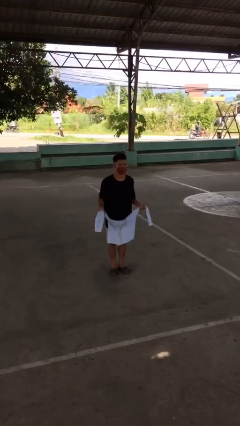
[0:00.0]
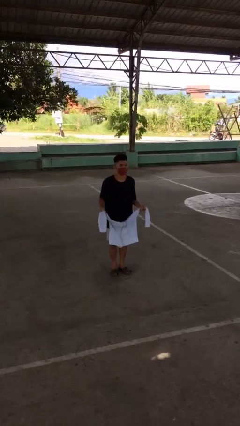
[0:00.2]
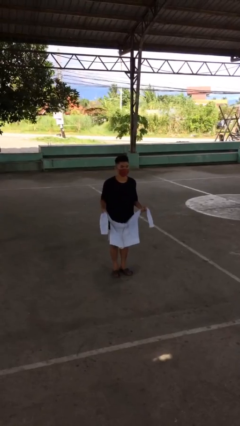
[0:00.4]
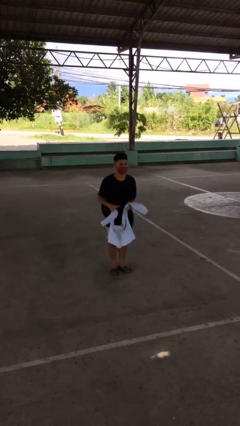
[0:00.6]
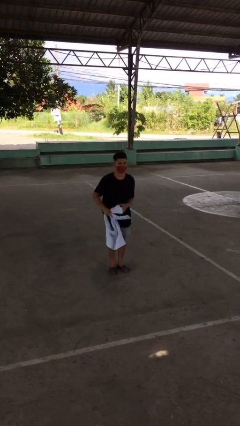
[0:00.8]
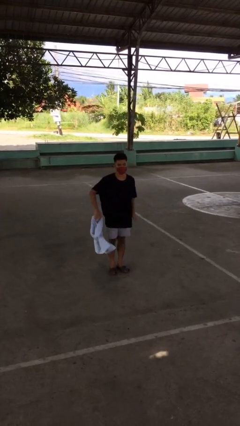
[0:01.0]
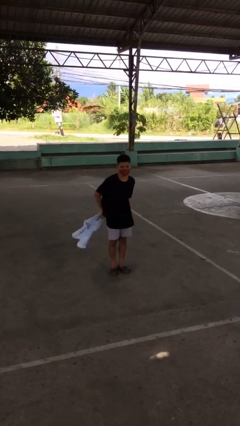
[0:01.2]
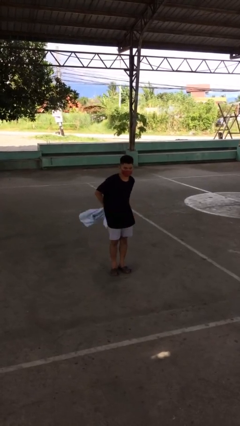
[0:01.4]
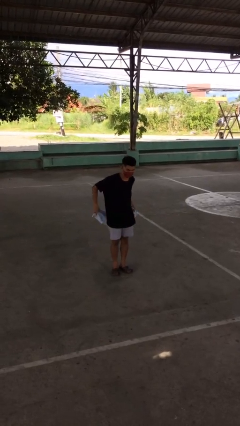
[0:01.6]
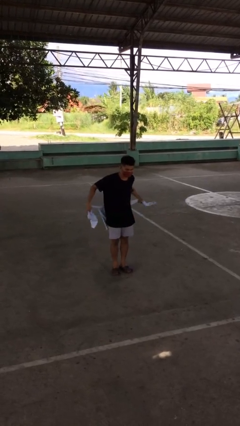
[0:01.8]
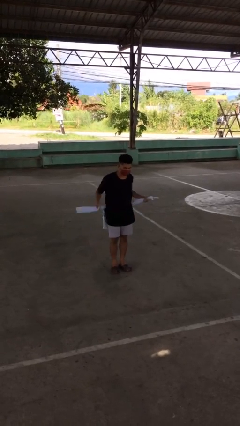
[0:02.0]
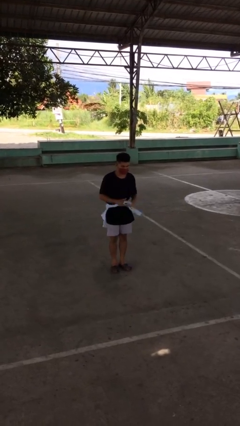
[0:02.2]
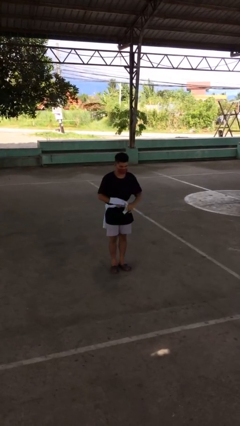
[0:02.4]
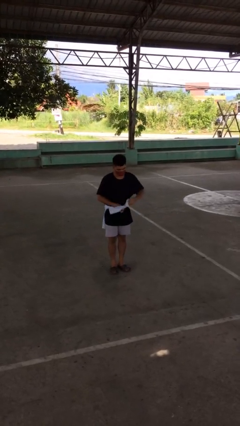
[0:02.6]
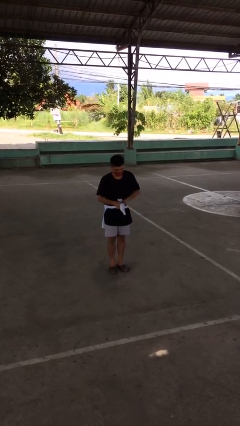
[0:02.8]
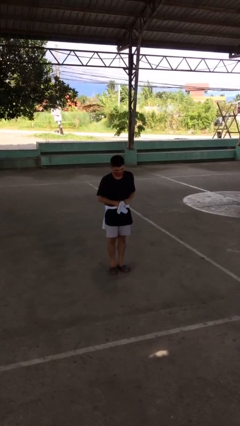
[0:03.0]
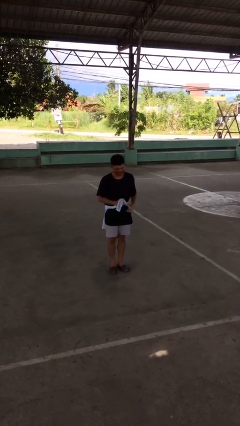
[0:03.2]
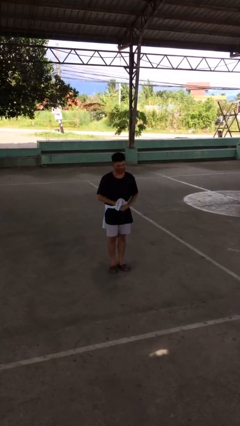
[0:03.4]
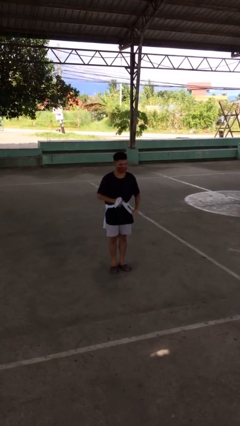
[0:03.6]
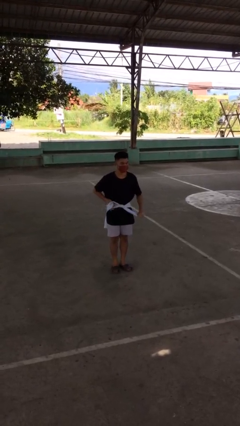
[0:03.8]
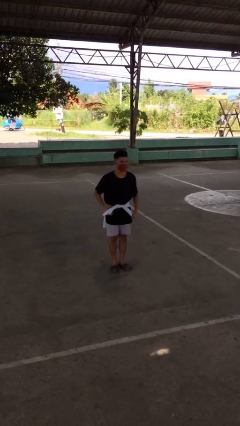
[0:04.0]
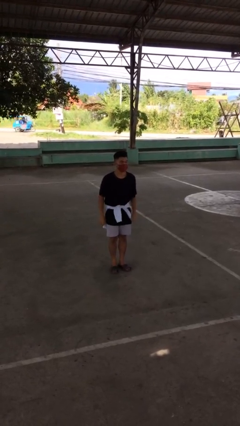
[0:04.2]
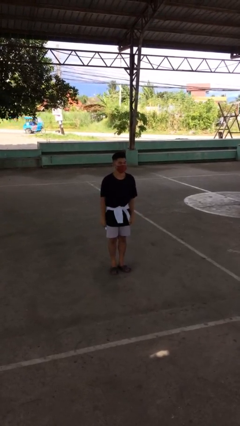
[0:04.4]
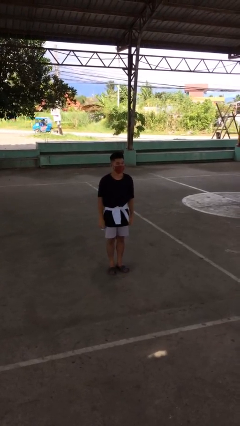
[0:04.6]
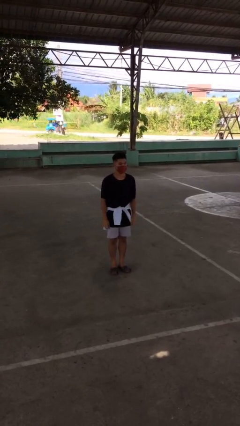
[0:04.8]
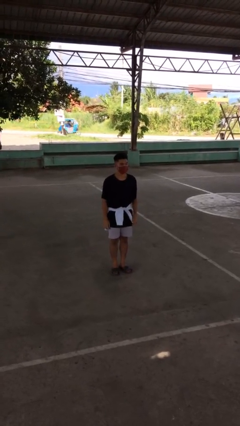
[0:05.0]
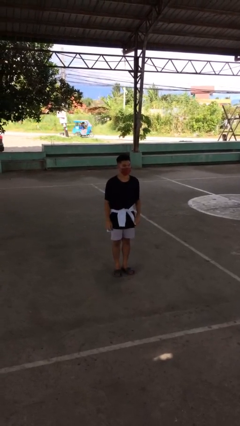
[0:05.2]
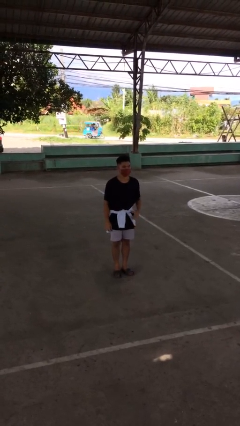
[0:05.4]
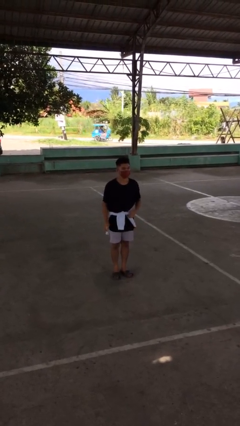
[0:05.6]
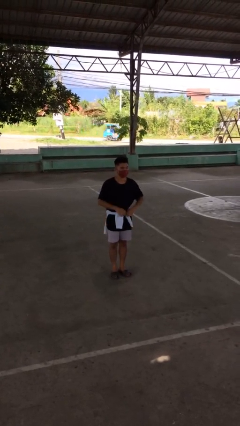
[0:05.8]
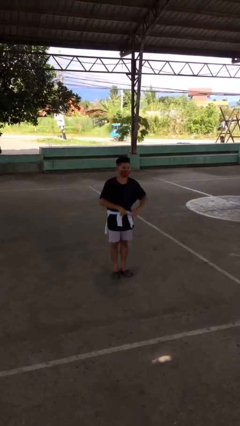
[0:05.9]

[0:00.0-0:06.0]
person ties jacket around waist

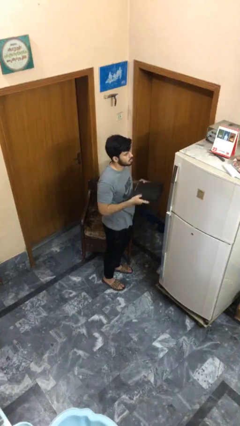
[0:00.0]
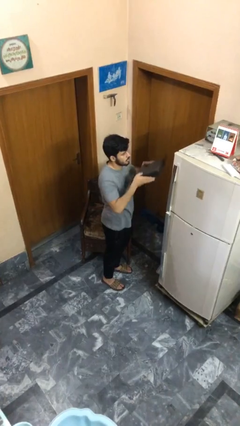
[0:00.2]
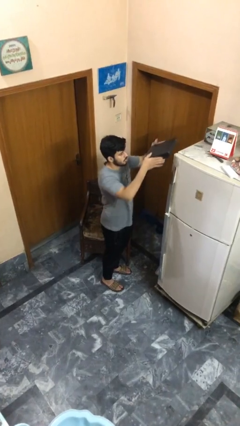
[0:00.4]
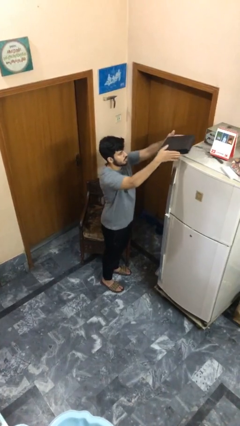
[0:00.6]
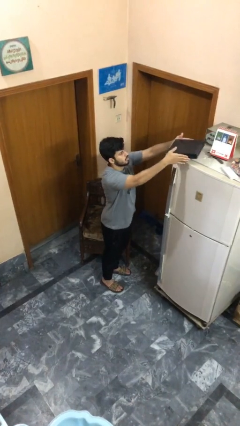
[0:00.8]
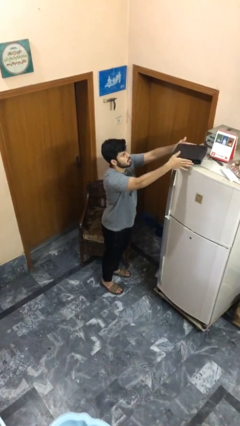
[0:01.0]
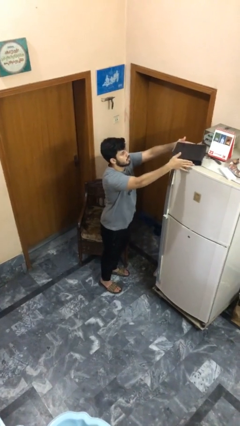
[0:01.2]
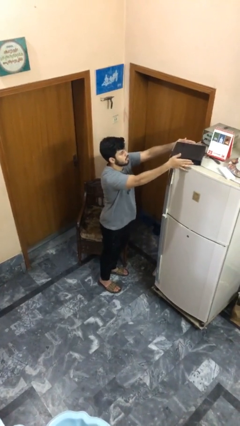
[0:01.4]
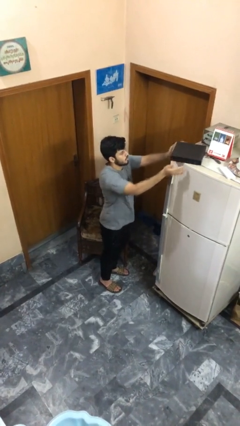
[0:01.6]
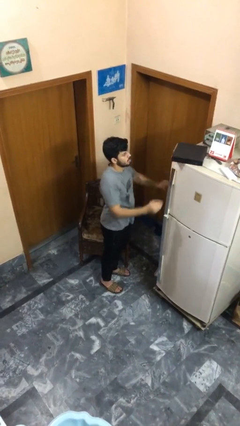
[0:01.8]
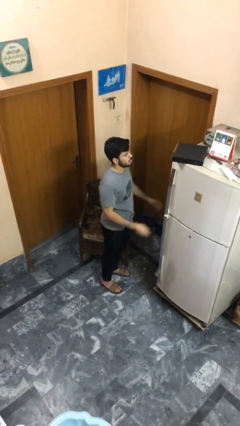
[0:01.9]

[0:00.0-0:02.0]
person puts down object on countertop

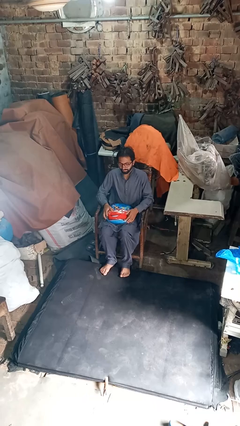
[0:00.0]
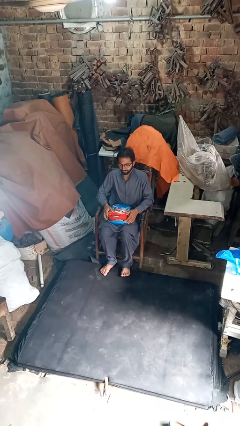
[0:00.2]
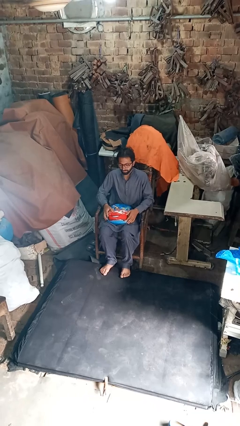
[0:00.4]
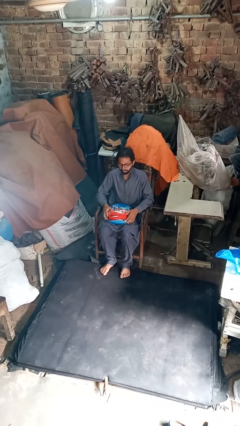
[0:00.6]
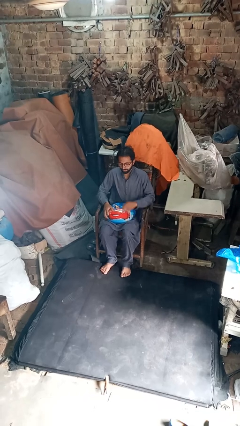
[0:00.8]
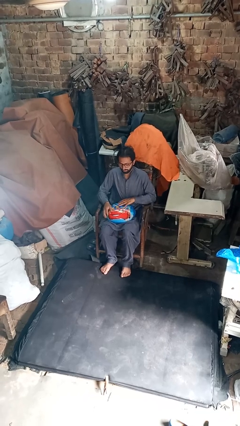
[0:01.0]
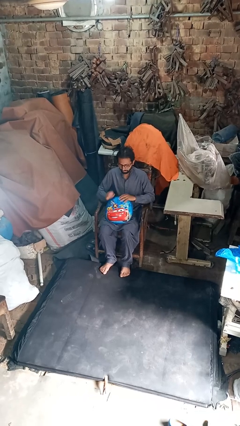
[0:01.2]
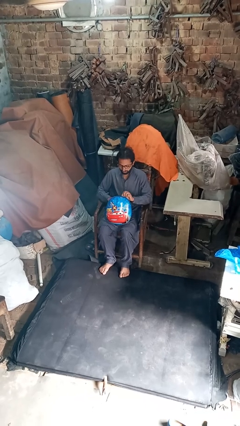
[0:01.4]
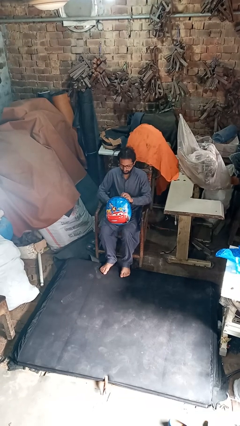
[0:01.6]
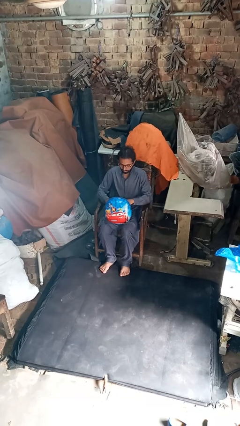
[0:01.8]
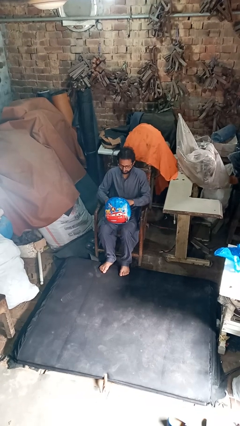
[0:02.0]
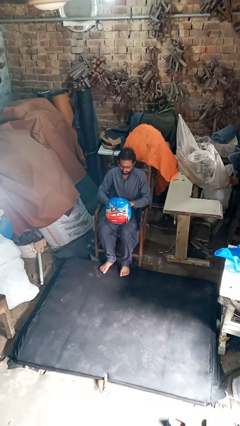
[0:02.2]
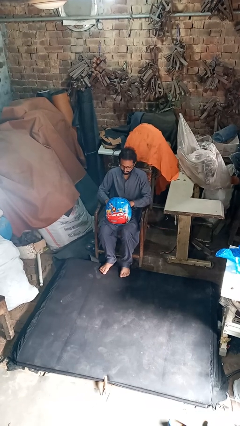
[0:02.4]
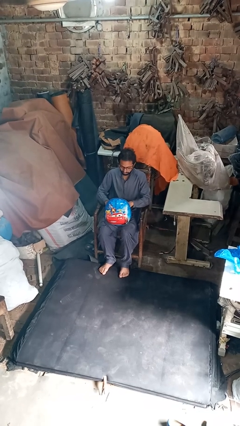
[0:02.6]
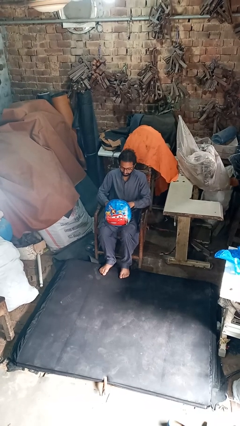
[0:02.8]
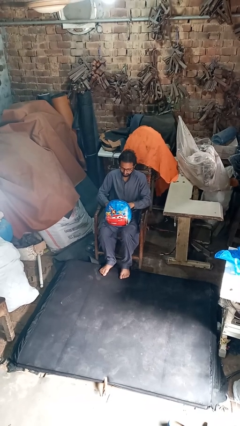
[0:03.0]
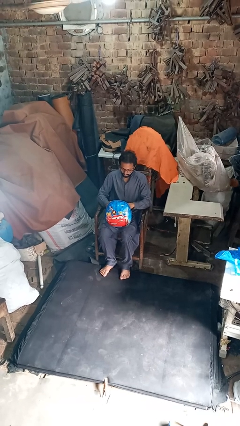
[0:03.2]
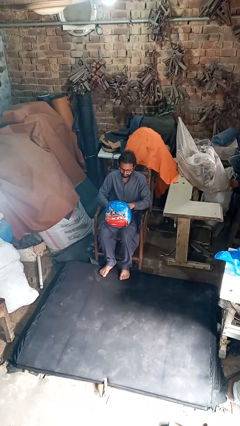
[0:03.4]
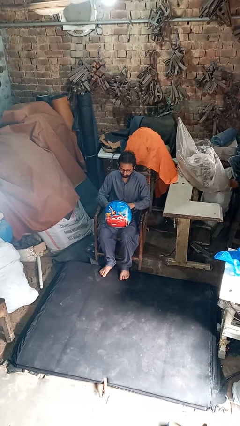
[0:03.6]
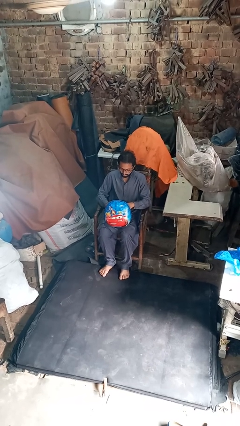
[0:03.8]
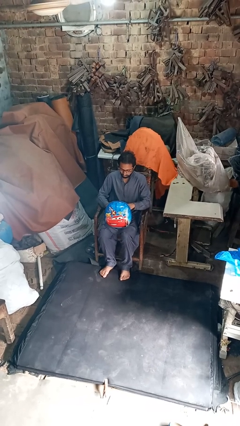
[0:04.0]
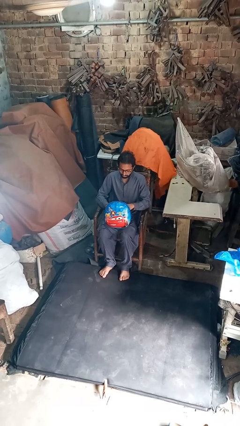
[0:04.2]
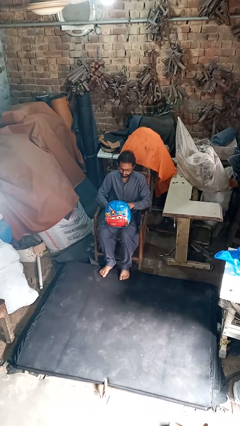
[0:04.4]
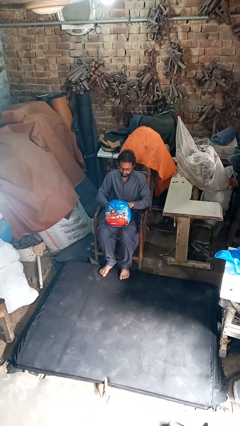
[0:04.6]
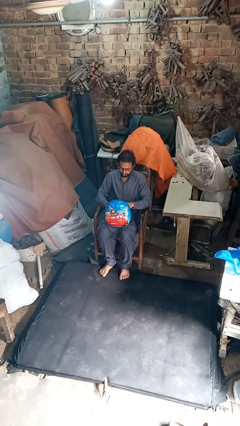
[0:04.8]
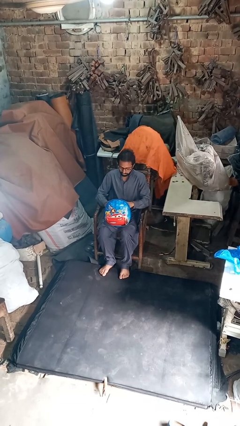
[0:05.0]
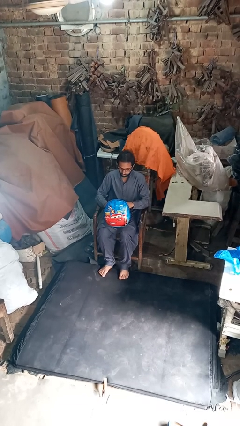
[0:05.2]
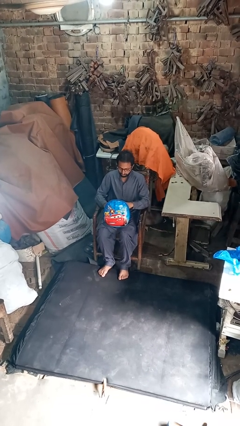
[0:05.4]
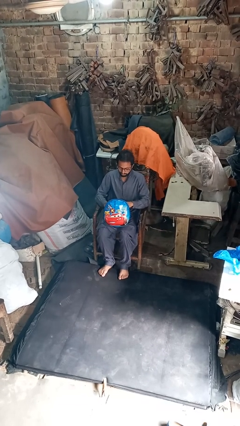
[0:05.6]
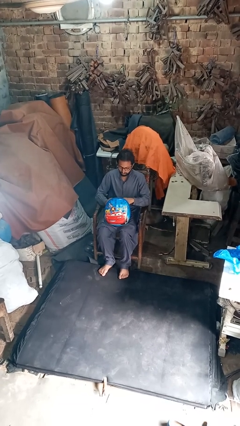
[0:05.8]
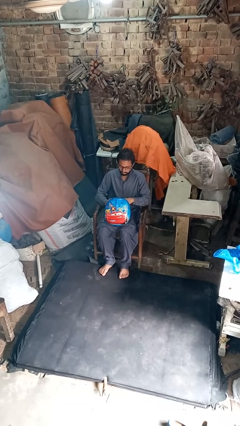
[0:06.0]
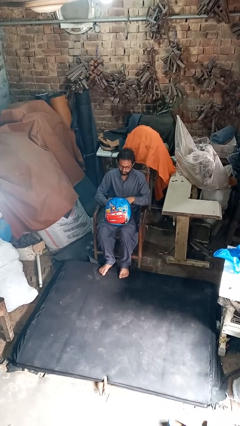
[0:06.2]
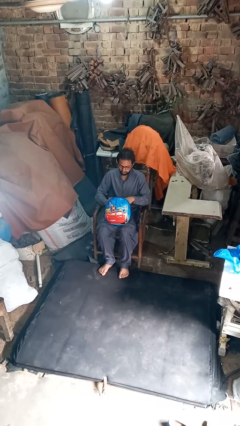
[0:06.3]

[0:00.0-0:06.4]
person searches in purse

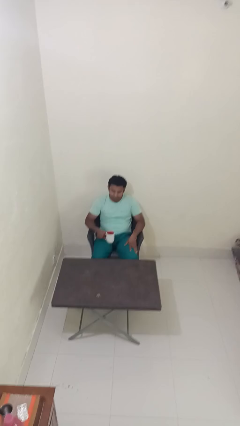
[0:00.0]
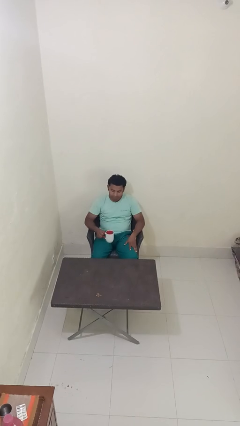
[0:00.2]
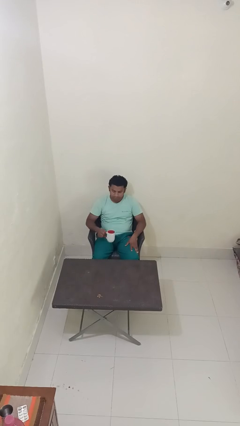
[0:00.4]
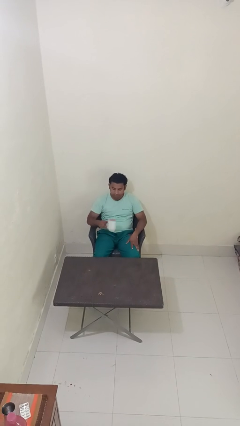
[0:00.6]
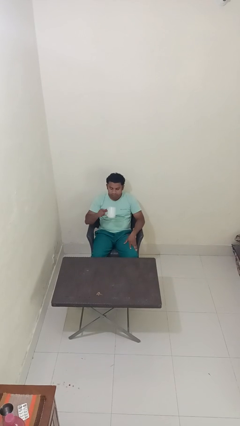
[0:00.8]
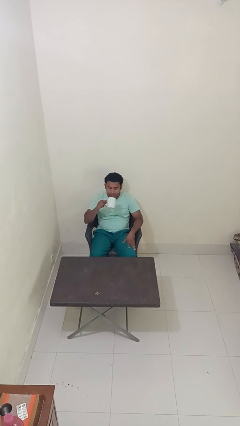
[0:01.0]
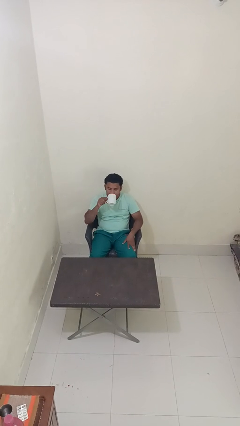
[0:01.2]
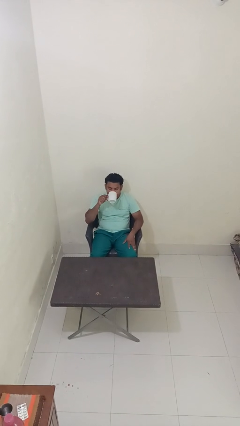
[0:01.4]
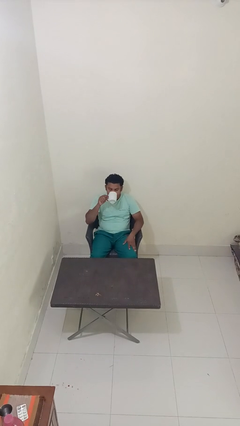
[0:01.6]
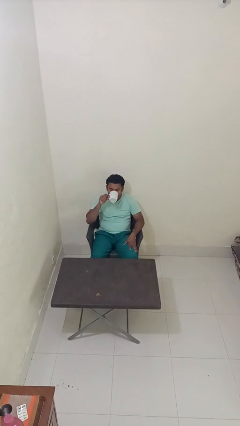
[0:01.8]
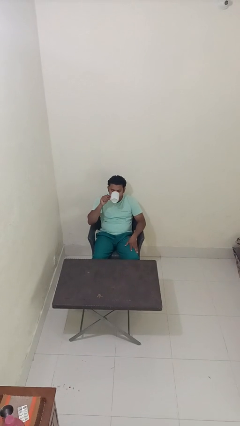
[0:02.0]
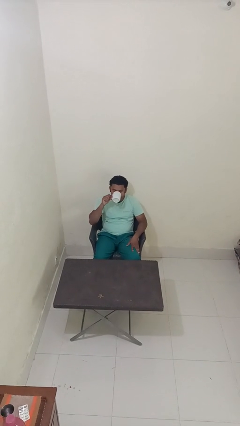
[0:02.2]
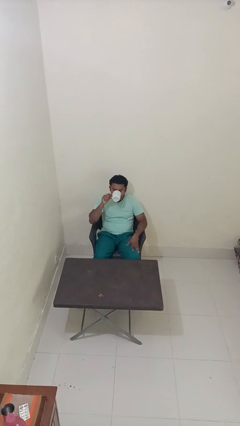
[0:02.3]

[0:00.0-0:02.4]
person drinks from mug

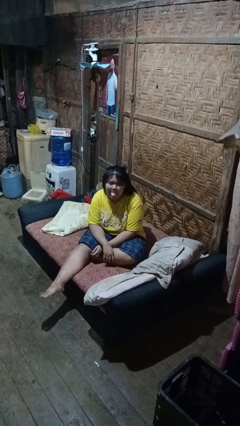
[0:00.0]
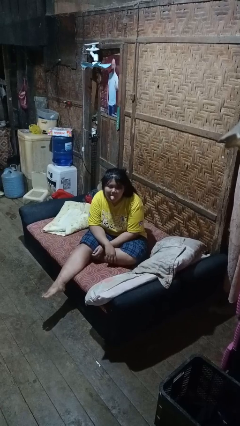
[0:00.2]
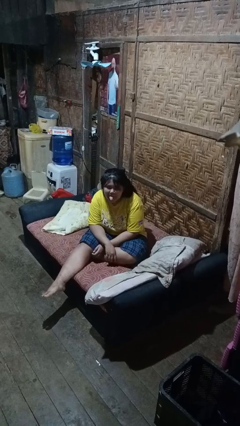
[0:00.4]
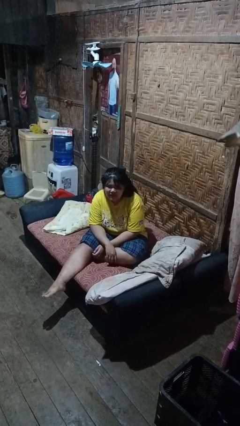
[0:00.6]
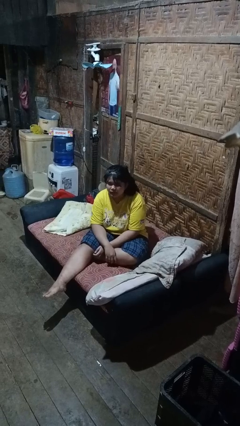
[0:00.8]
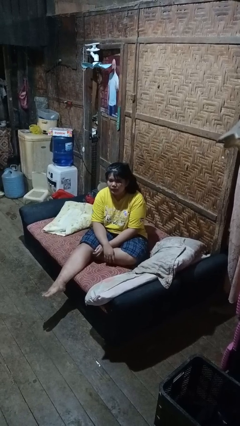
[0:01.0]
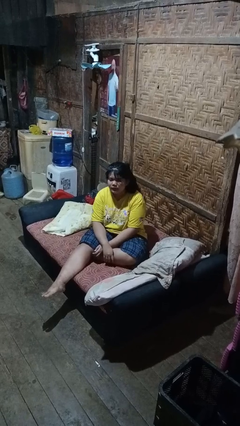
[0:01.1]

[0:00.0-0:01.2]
person sticks out tongue
